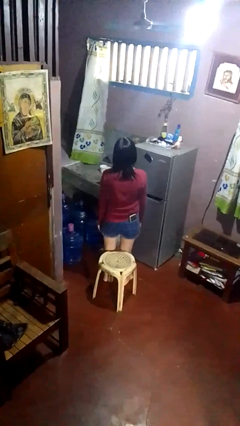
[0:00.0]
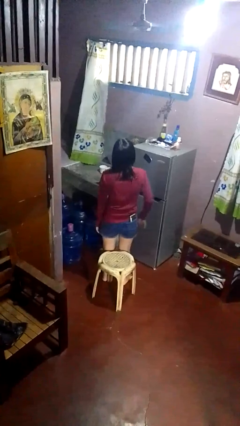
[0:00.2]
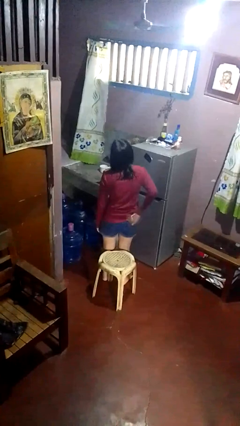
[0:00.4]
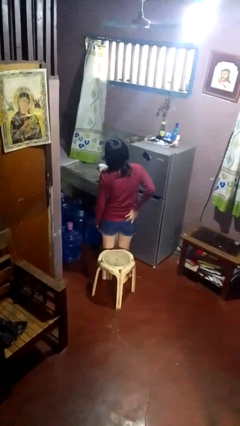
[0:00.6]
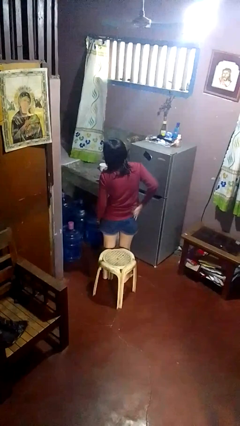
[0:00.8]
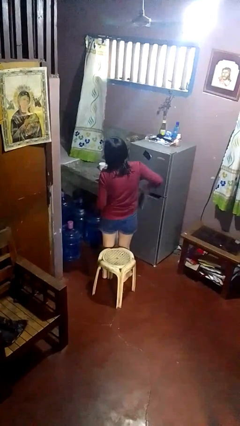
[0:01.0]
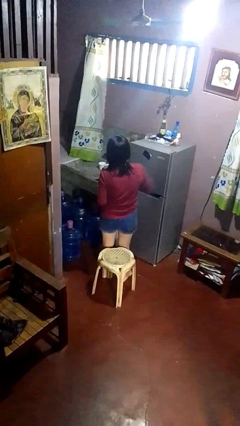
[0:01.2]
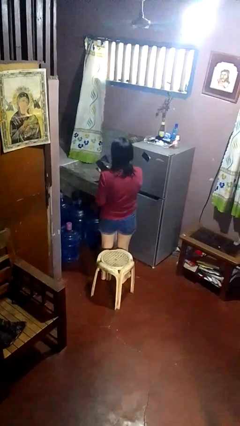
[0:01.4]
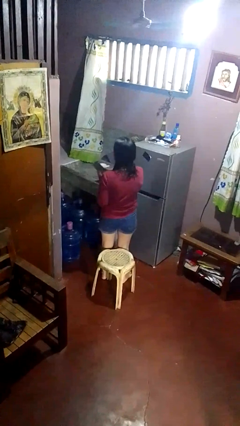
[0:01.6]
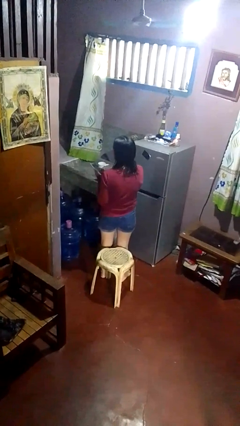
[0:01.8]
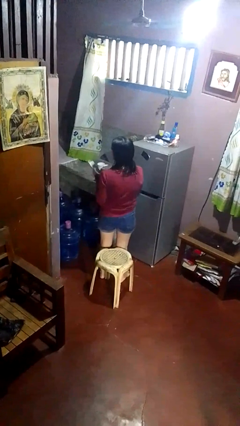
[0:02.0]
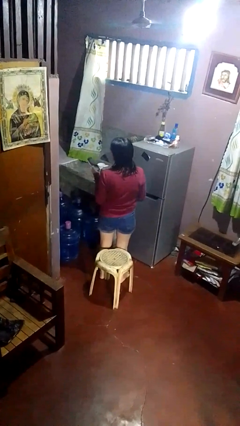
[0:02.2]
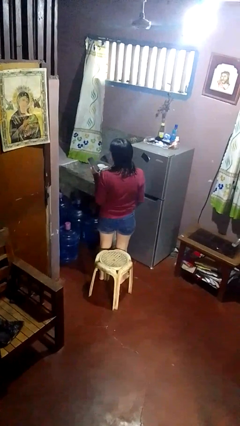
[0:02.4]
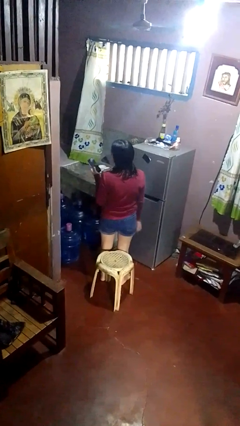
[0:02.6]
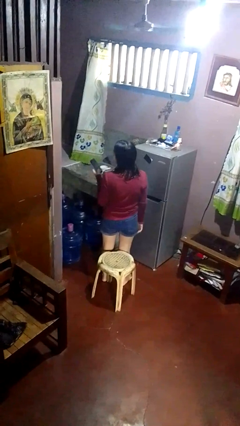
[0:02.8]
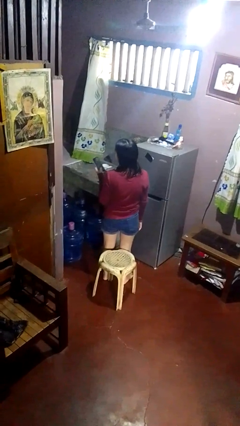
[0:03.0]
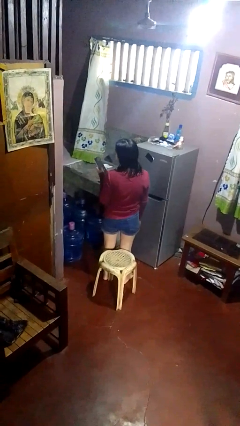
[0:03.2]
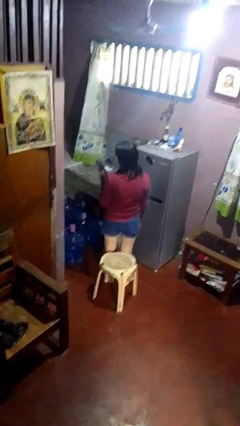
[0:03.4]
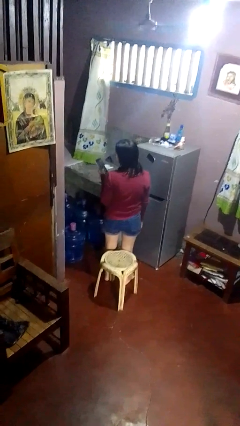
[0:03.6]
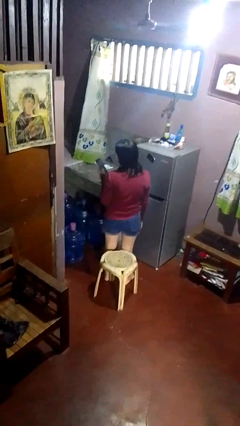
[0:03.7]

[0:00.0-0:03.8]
person takes phone from pocket

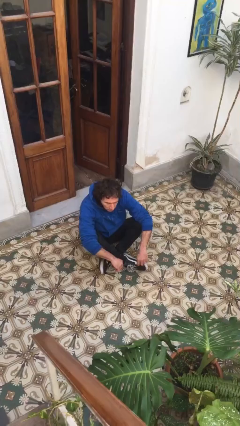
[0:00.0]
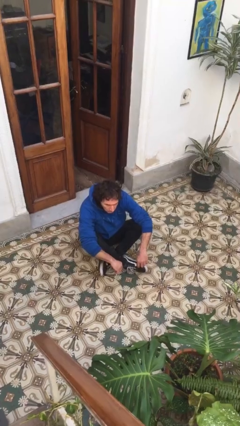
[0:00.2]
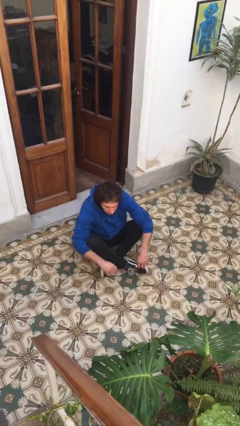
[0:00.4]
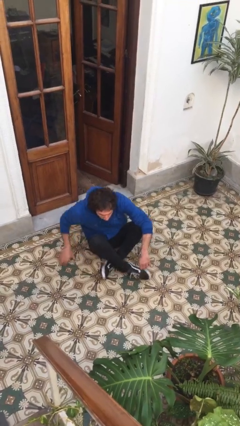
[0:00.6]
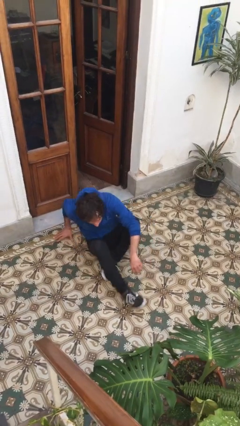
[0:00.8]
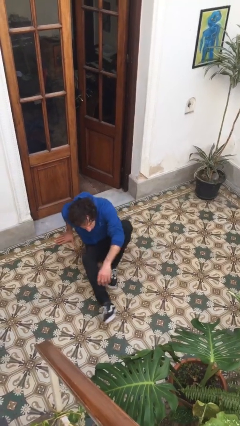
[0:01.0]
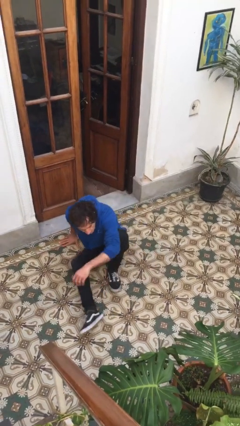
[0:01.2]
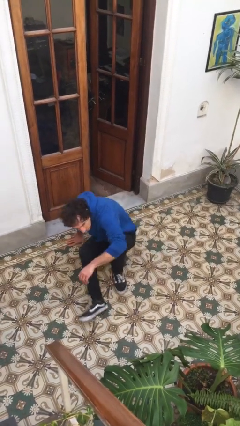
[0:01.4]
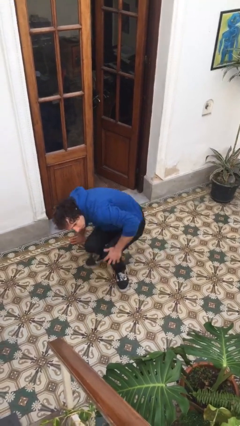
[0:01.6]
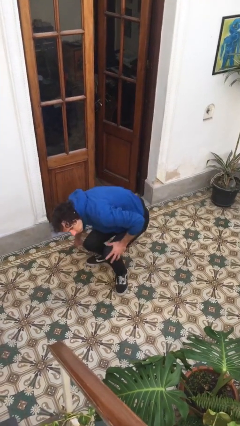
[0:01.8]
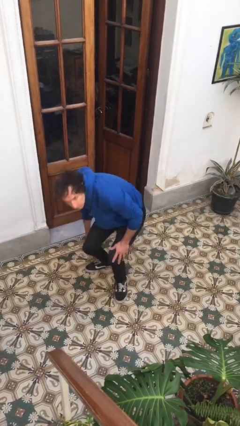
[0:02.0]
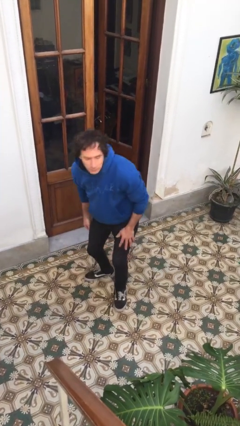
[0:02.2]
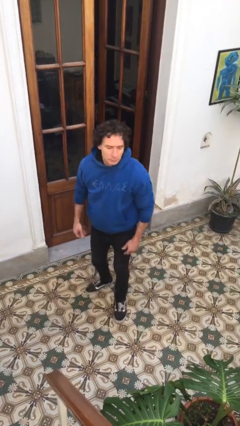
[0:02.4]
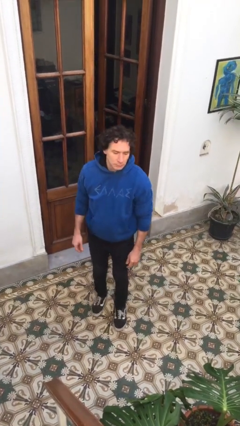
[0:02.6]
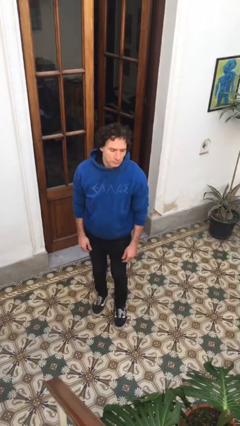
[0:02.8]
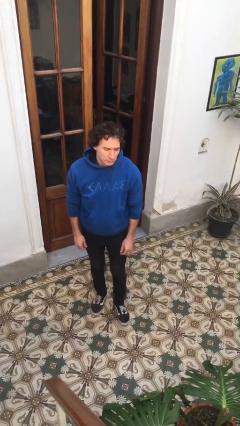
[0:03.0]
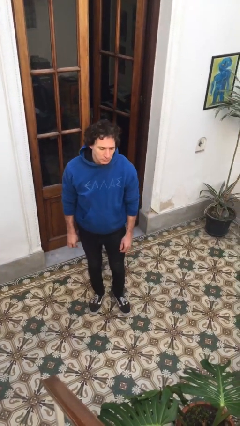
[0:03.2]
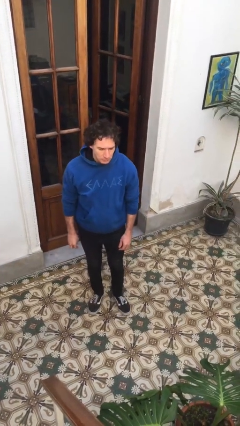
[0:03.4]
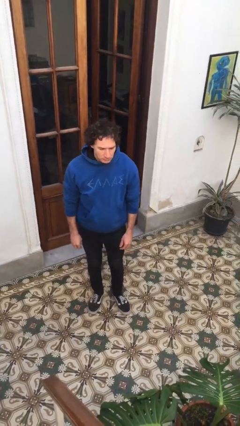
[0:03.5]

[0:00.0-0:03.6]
person stands up from floor

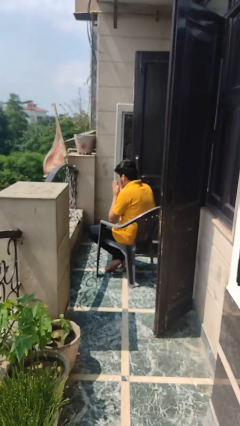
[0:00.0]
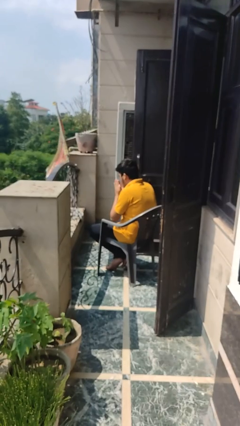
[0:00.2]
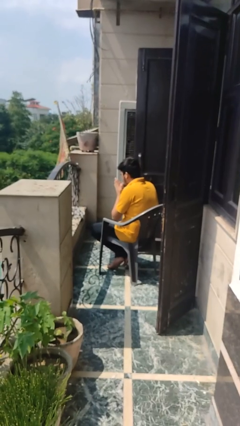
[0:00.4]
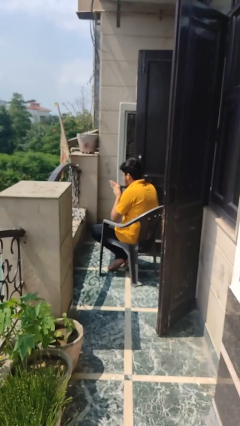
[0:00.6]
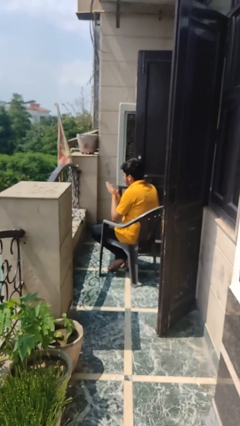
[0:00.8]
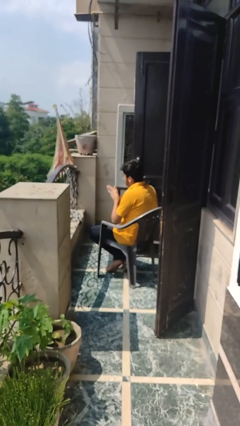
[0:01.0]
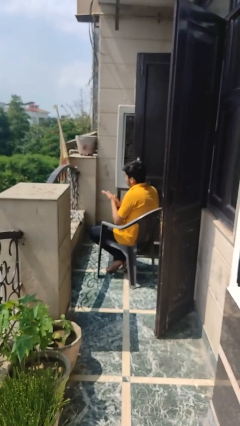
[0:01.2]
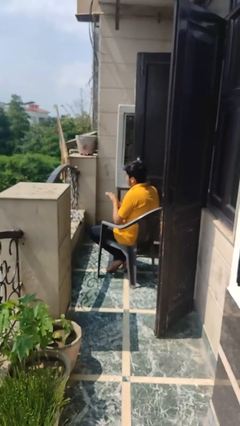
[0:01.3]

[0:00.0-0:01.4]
person blows into hands

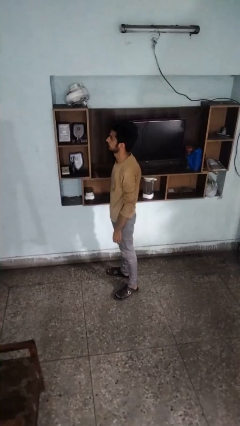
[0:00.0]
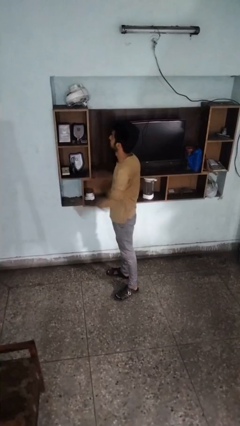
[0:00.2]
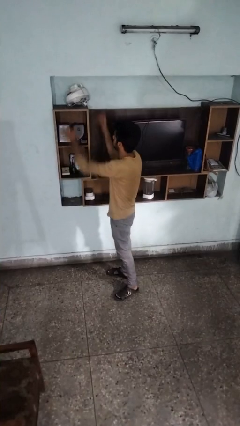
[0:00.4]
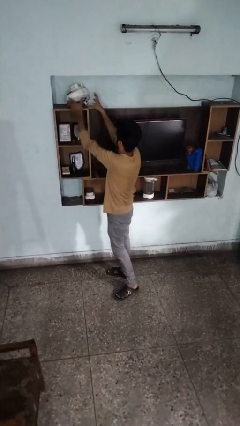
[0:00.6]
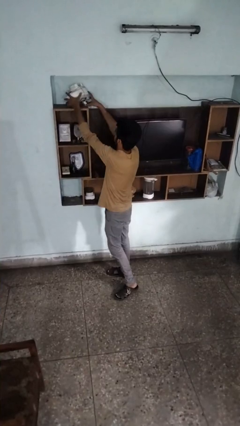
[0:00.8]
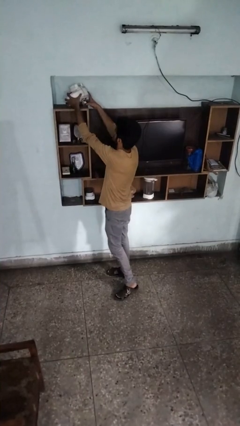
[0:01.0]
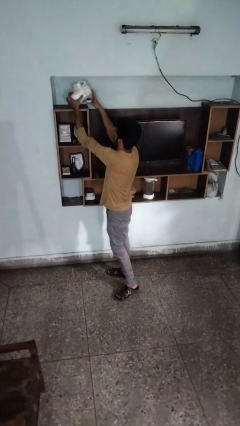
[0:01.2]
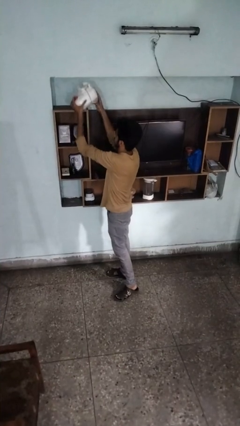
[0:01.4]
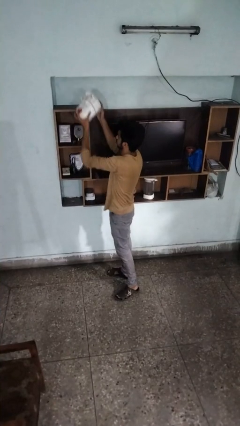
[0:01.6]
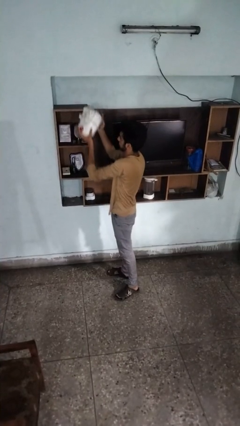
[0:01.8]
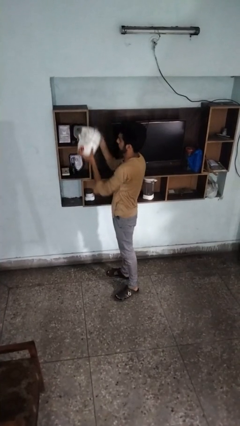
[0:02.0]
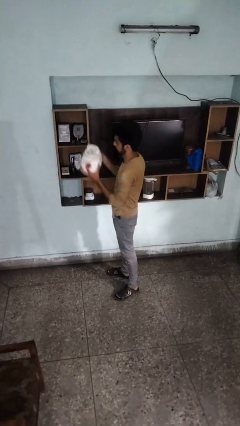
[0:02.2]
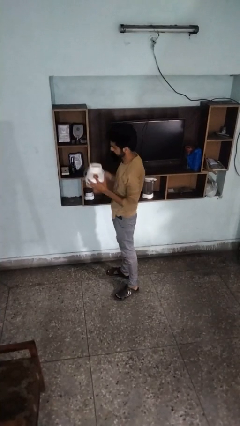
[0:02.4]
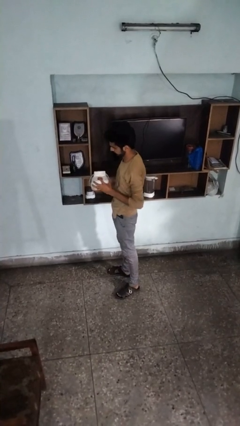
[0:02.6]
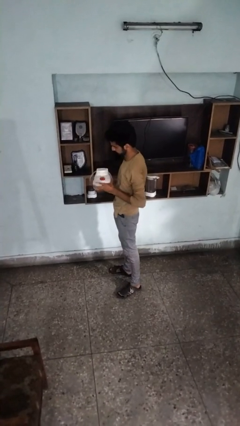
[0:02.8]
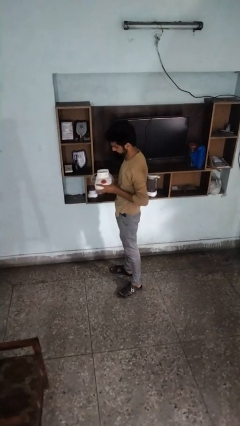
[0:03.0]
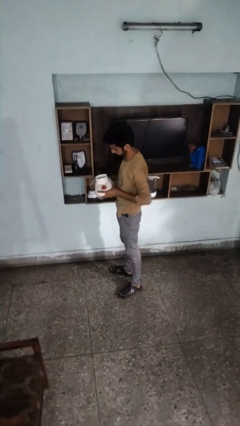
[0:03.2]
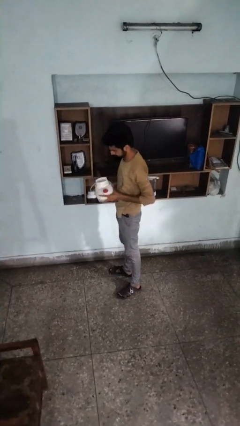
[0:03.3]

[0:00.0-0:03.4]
person picks up object from shelf

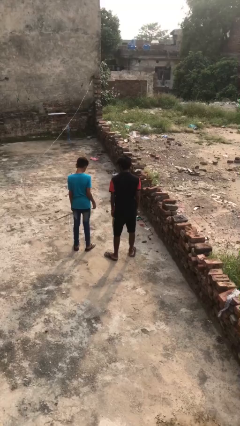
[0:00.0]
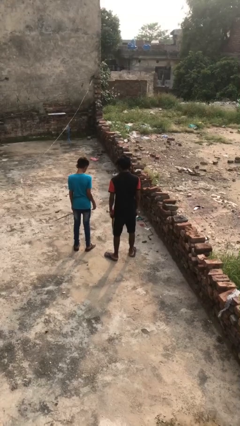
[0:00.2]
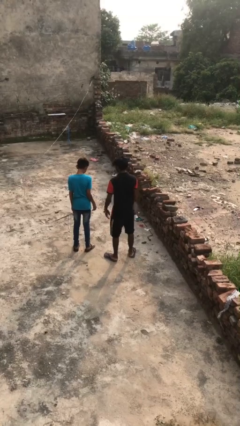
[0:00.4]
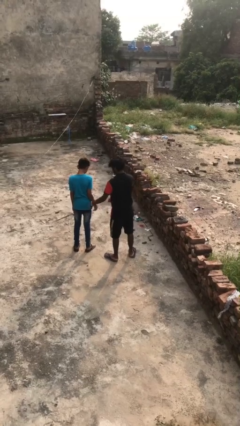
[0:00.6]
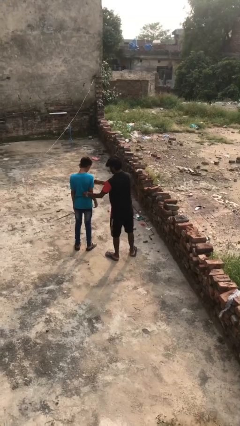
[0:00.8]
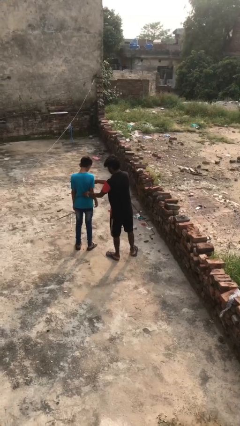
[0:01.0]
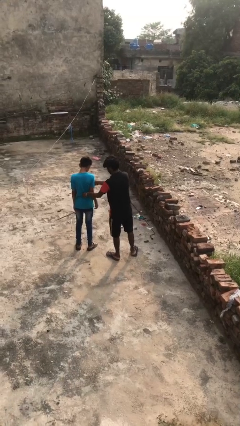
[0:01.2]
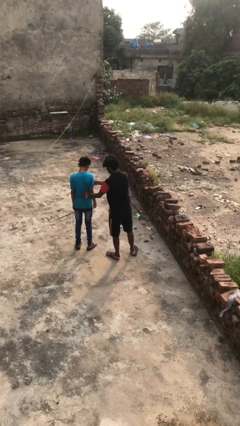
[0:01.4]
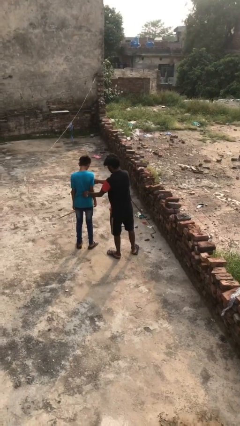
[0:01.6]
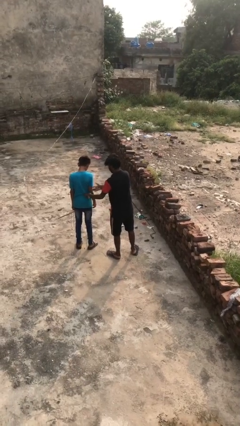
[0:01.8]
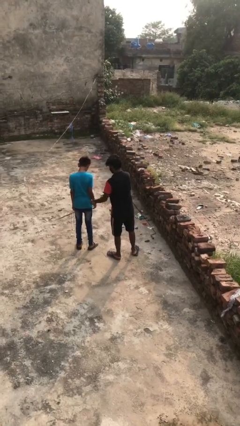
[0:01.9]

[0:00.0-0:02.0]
person tickles person

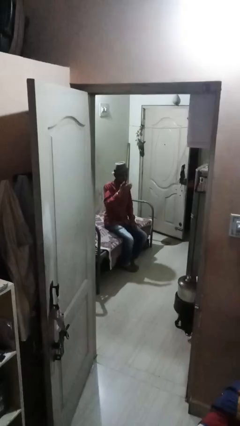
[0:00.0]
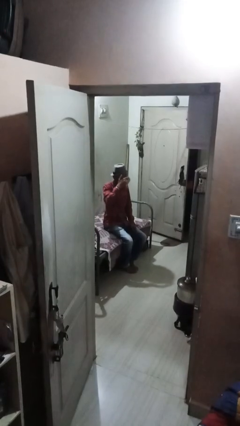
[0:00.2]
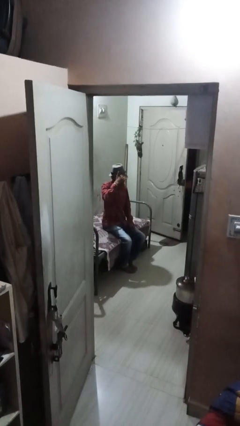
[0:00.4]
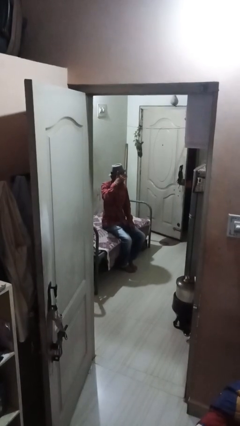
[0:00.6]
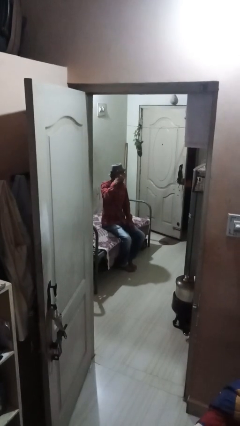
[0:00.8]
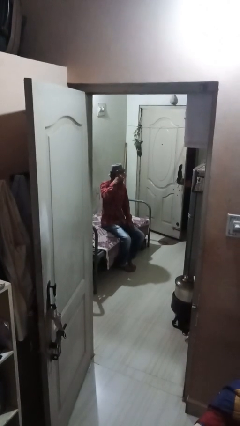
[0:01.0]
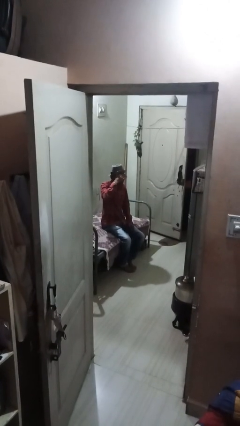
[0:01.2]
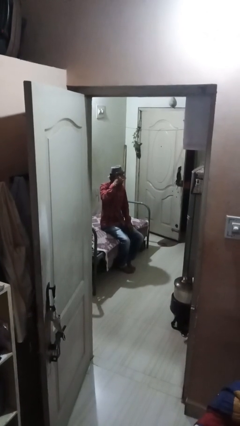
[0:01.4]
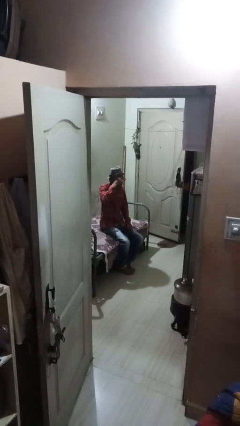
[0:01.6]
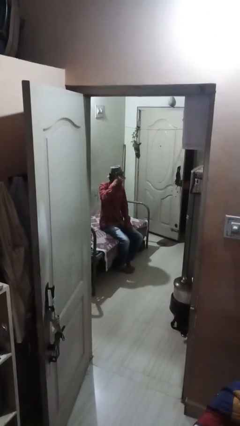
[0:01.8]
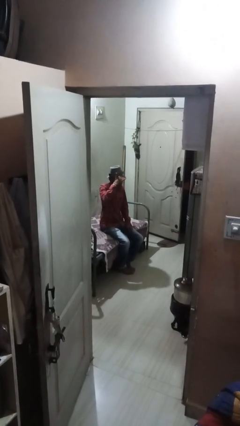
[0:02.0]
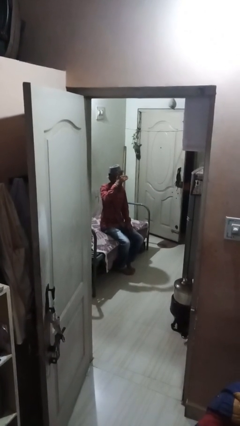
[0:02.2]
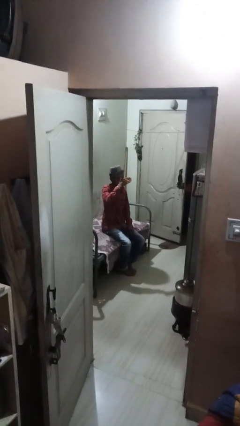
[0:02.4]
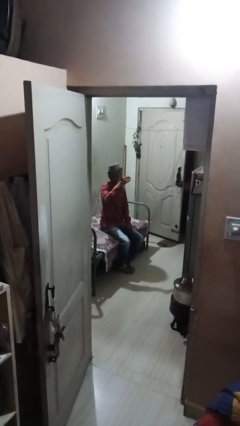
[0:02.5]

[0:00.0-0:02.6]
person shades eyes

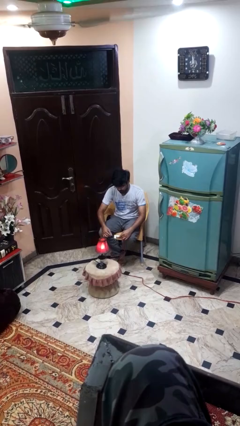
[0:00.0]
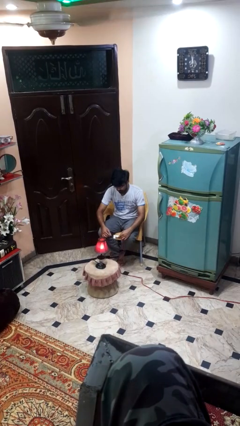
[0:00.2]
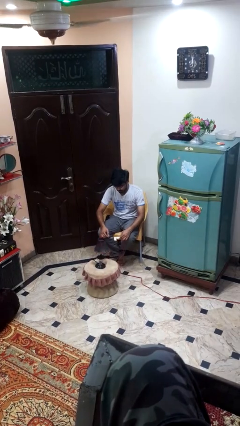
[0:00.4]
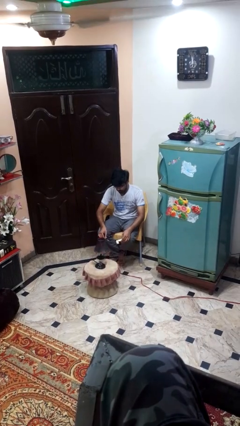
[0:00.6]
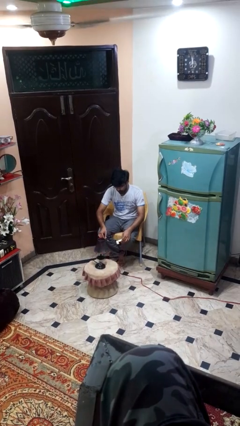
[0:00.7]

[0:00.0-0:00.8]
person turns off lamp
